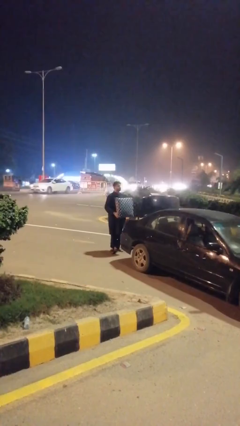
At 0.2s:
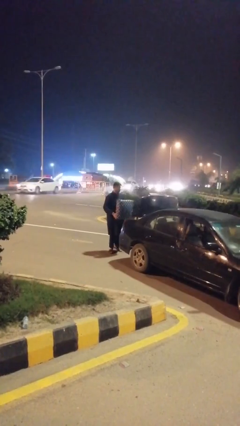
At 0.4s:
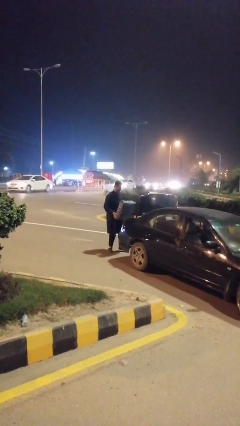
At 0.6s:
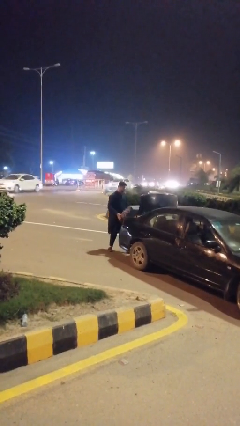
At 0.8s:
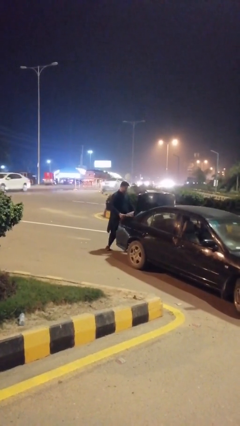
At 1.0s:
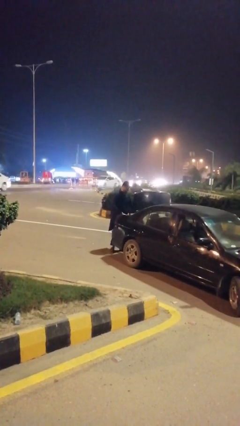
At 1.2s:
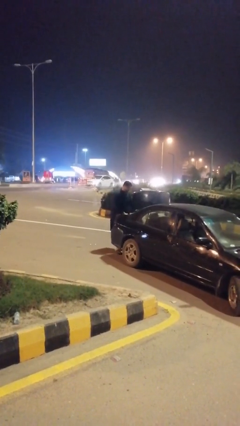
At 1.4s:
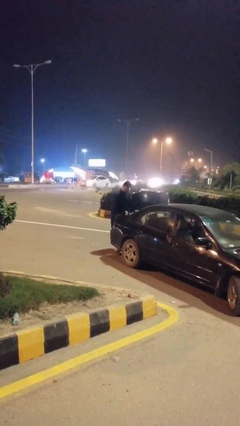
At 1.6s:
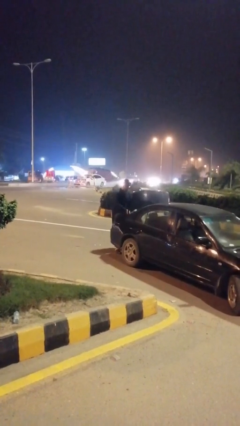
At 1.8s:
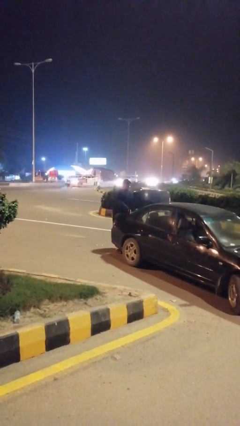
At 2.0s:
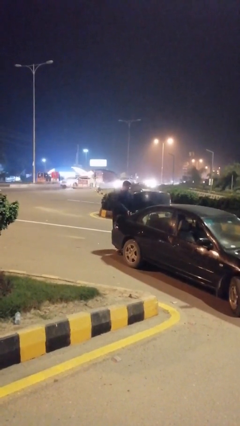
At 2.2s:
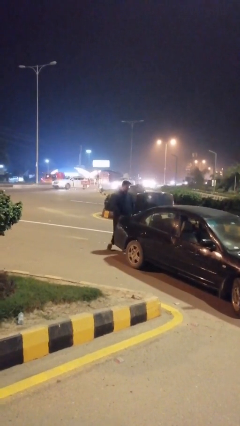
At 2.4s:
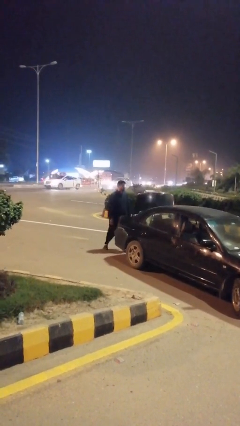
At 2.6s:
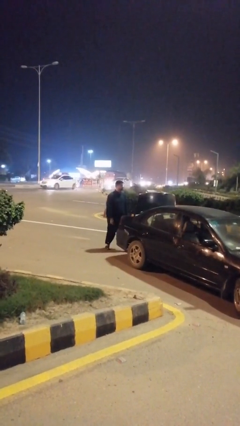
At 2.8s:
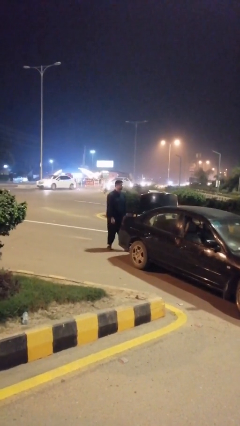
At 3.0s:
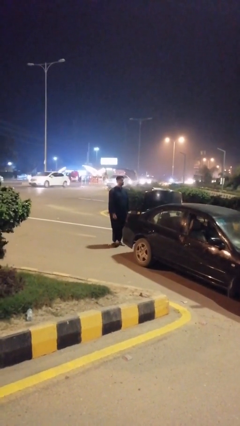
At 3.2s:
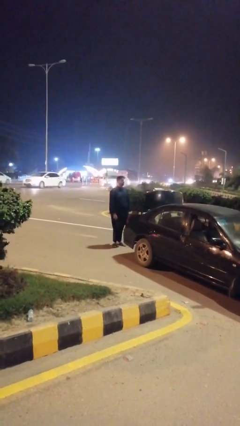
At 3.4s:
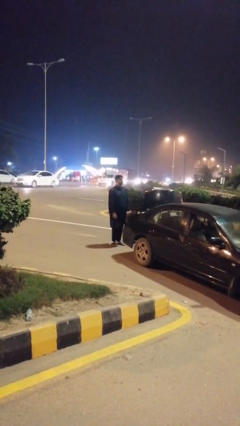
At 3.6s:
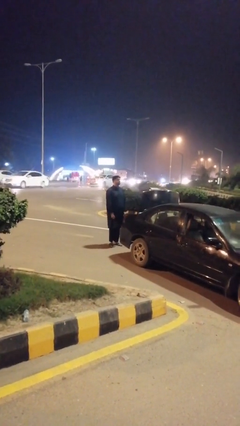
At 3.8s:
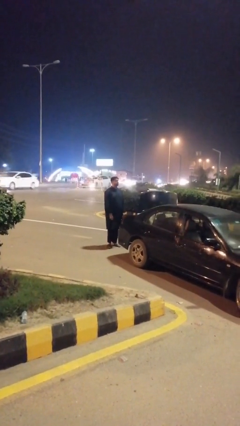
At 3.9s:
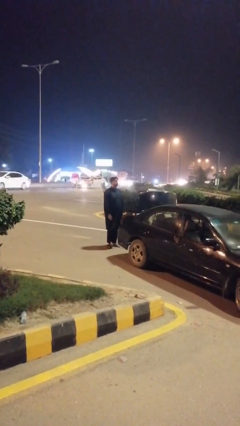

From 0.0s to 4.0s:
person loads car

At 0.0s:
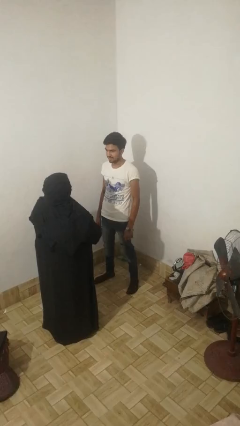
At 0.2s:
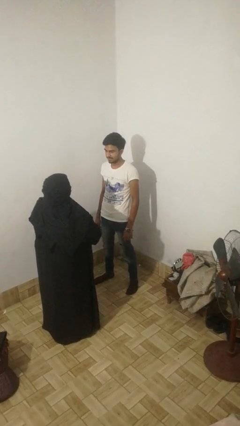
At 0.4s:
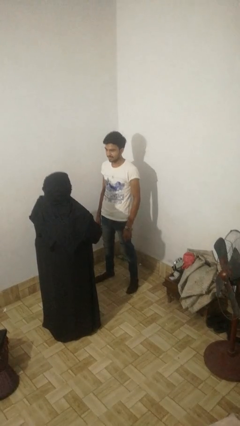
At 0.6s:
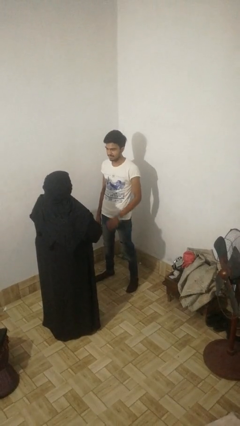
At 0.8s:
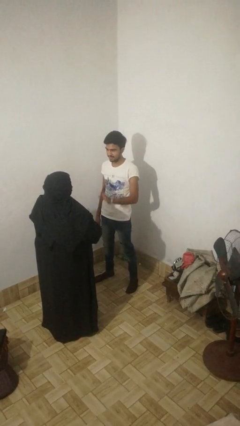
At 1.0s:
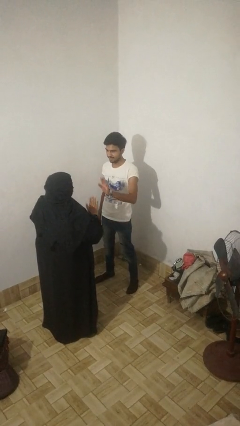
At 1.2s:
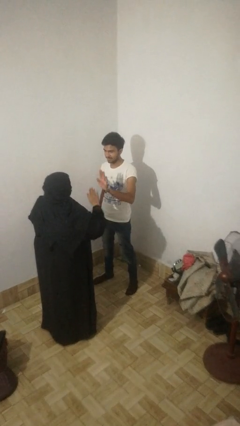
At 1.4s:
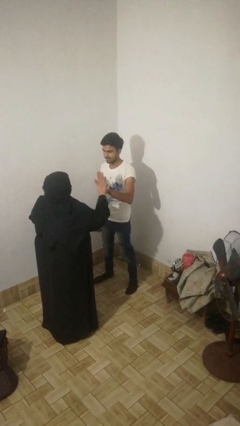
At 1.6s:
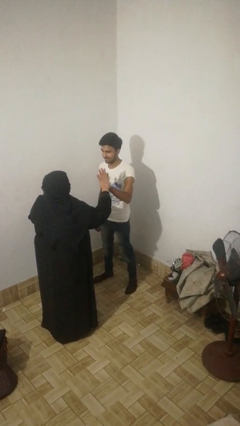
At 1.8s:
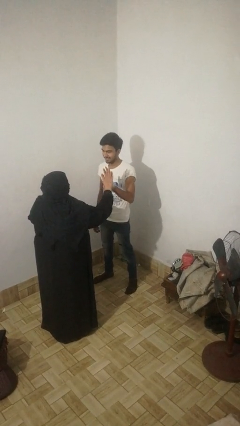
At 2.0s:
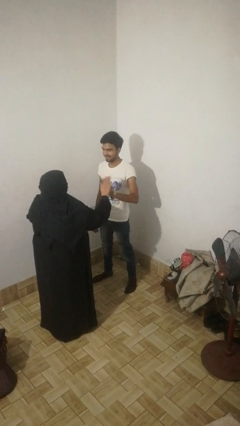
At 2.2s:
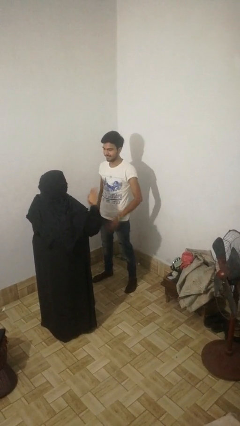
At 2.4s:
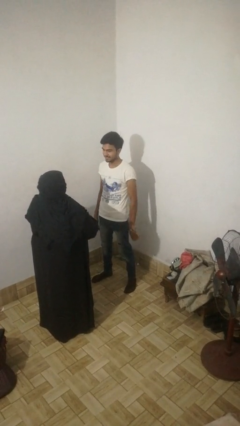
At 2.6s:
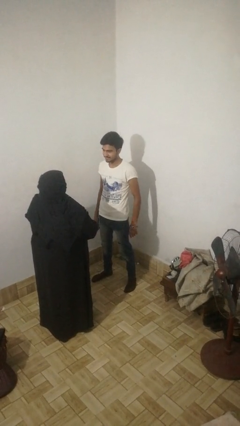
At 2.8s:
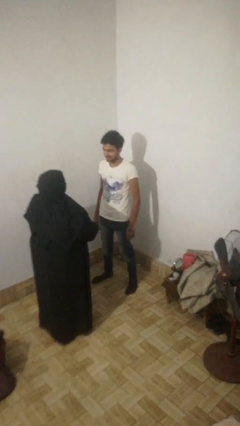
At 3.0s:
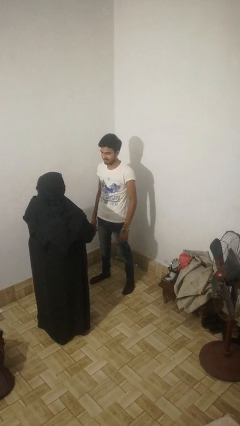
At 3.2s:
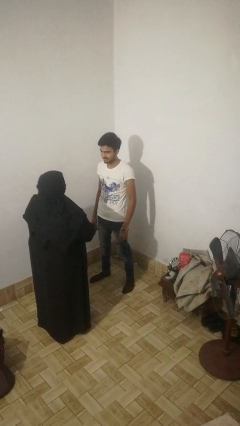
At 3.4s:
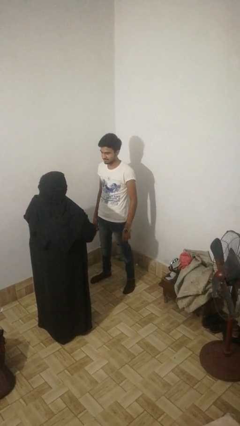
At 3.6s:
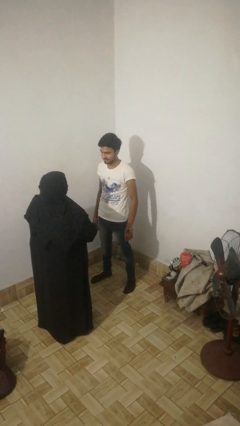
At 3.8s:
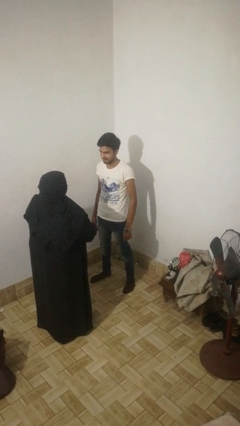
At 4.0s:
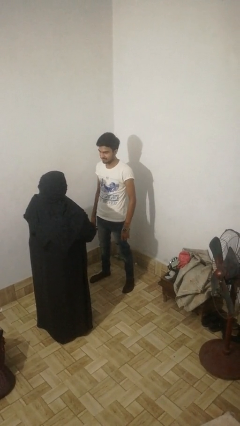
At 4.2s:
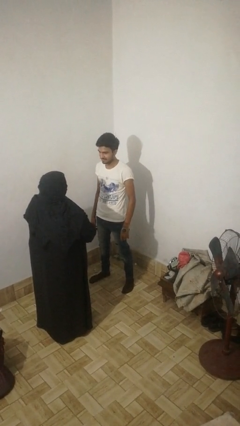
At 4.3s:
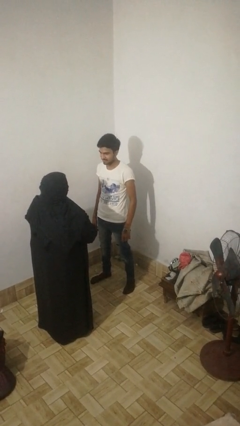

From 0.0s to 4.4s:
person highfives hand

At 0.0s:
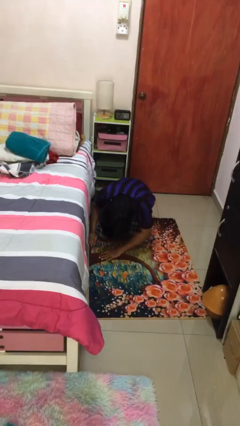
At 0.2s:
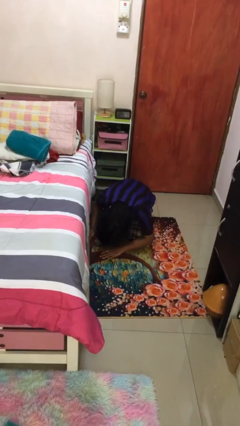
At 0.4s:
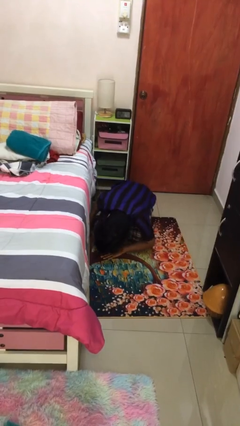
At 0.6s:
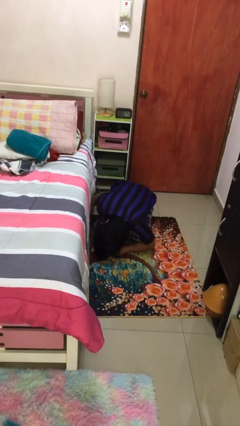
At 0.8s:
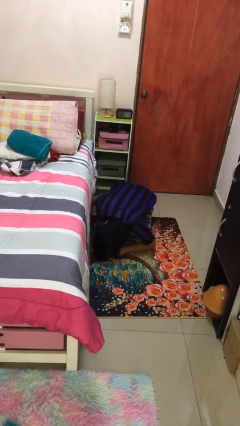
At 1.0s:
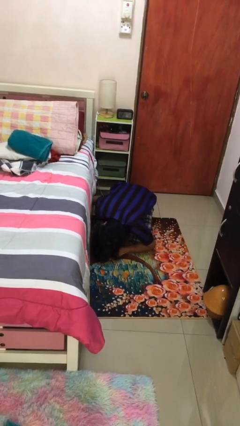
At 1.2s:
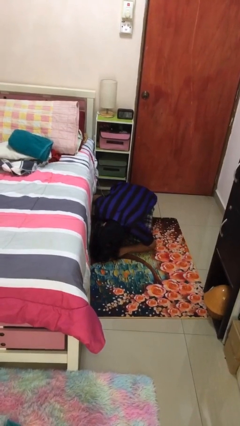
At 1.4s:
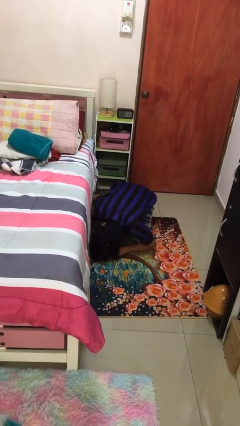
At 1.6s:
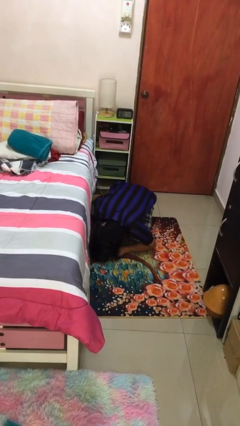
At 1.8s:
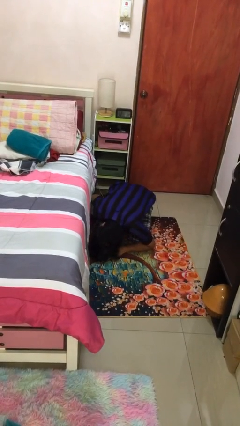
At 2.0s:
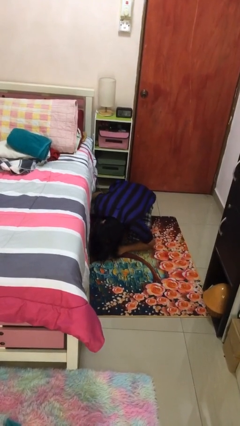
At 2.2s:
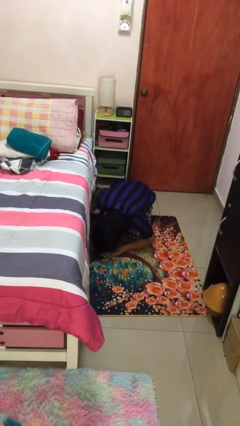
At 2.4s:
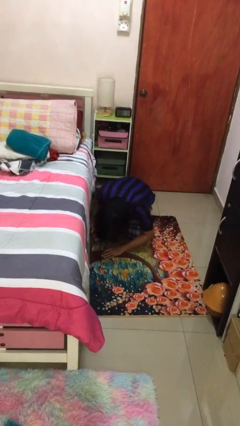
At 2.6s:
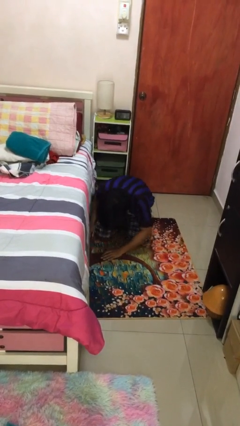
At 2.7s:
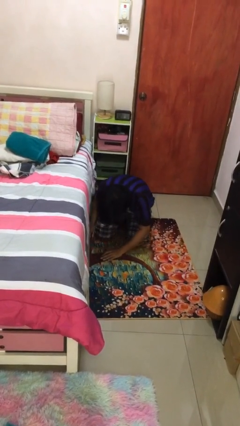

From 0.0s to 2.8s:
person searches under bed

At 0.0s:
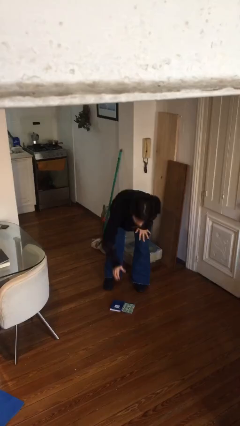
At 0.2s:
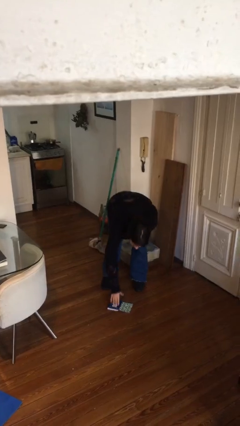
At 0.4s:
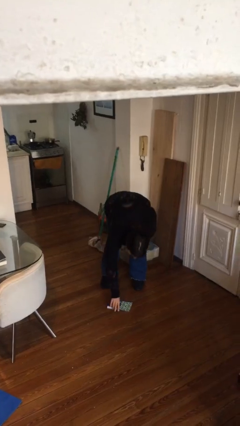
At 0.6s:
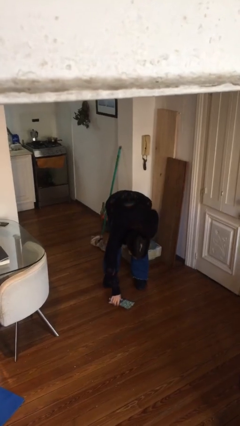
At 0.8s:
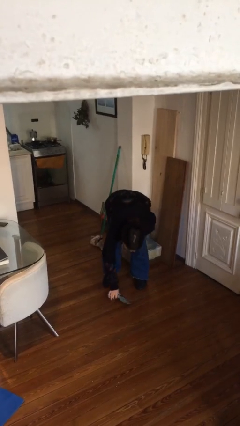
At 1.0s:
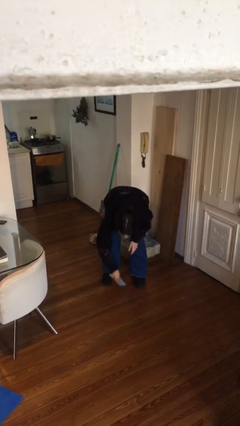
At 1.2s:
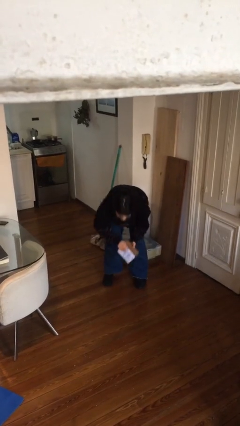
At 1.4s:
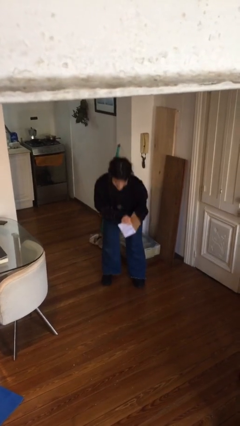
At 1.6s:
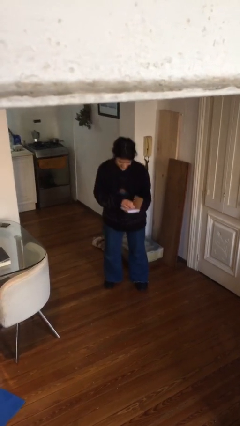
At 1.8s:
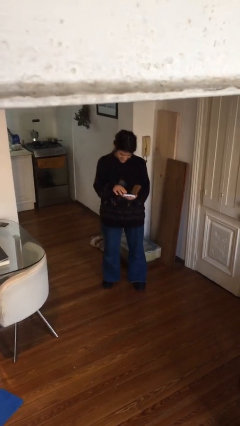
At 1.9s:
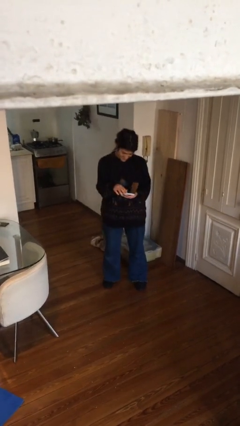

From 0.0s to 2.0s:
person picks up object from floor

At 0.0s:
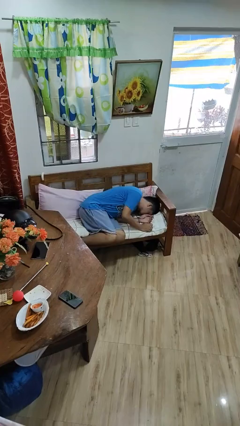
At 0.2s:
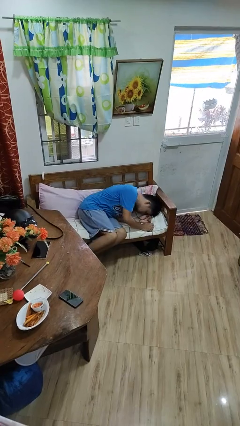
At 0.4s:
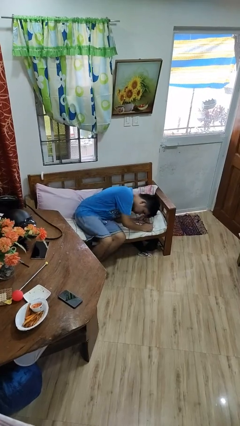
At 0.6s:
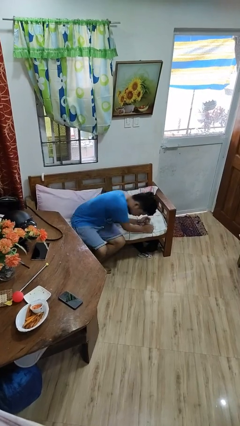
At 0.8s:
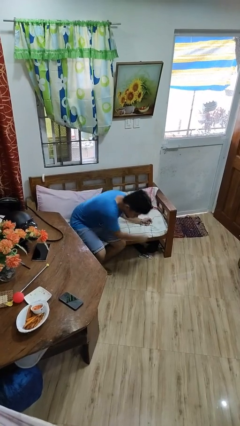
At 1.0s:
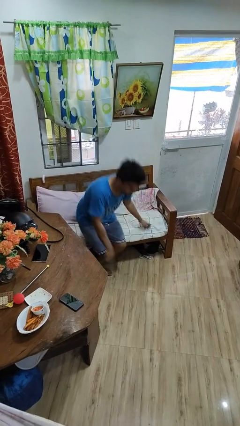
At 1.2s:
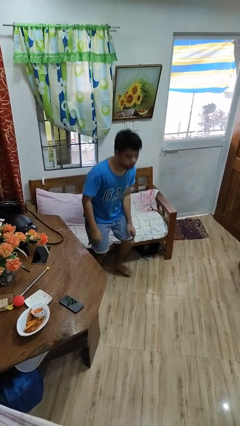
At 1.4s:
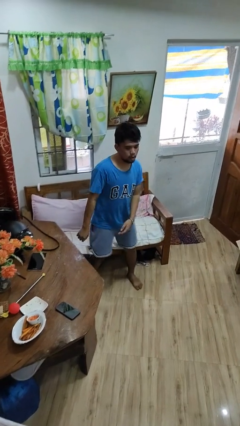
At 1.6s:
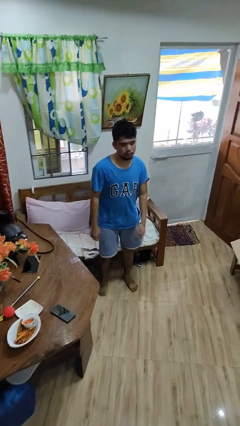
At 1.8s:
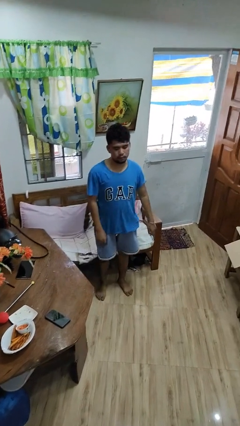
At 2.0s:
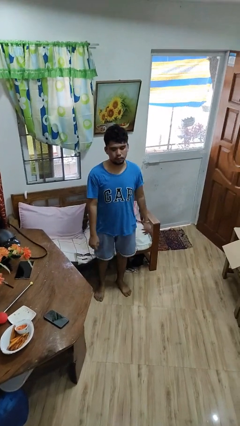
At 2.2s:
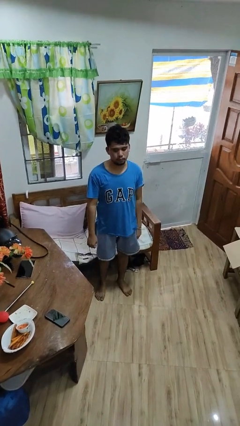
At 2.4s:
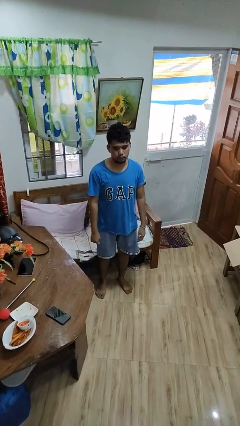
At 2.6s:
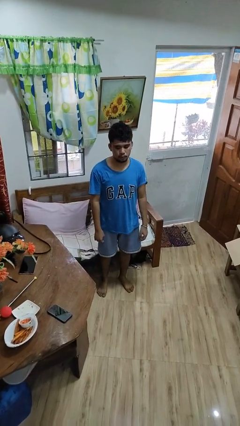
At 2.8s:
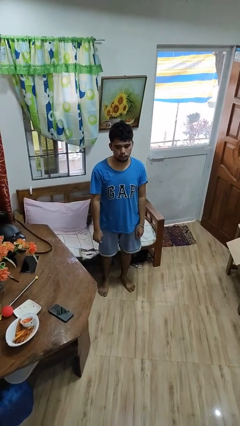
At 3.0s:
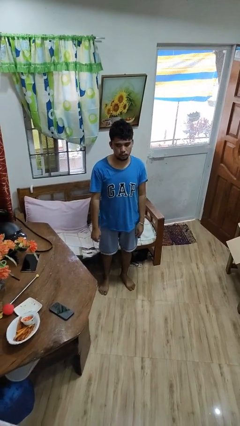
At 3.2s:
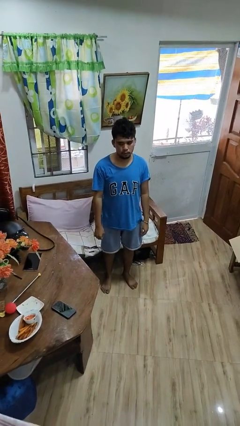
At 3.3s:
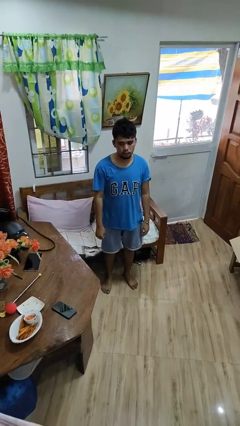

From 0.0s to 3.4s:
person stands up

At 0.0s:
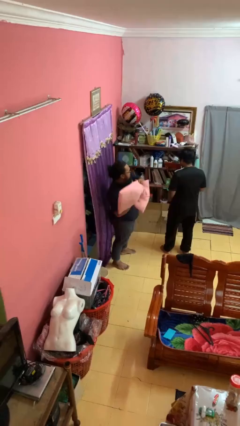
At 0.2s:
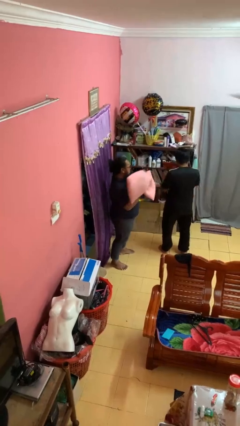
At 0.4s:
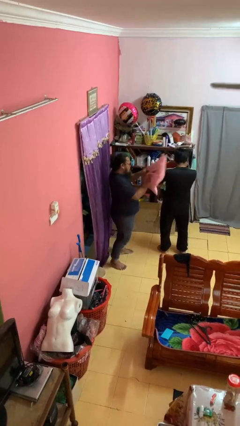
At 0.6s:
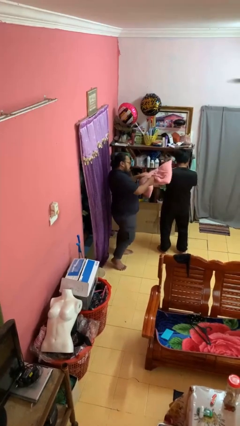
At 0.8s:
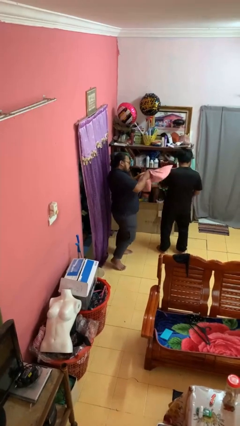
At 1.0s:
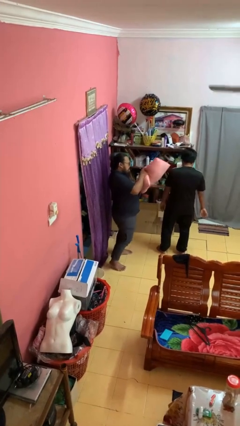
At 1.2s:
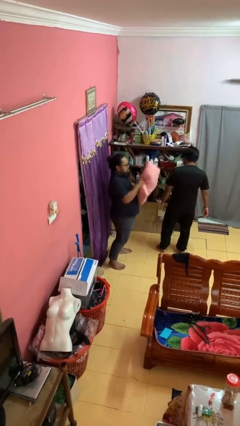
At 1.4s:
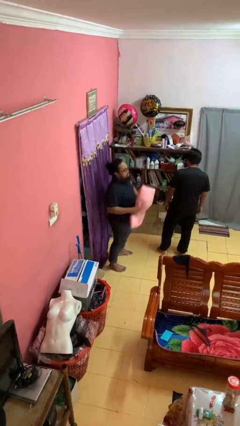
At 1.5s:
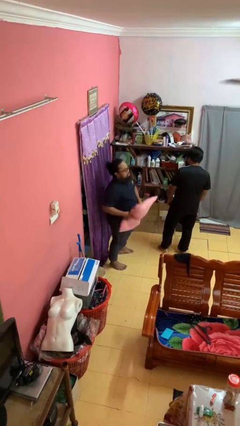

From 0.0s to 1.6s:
person hits person with pillow
